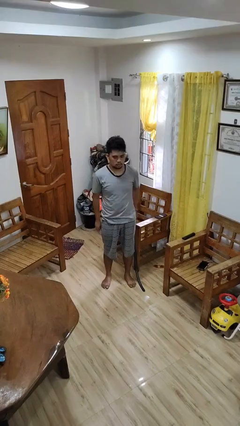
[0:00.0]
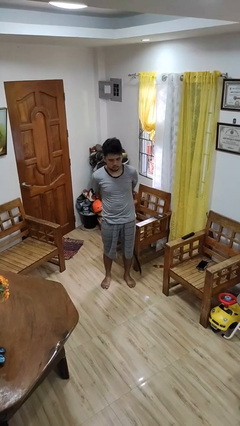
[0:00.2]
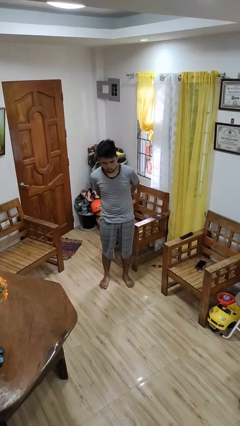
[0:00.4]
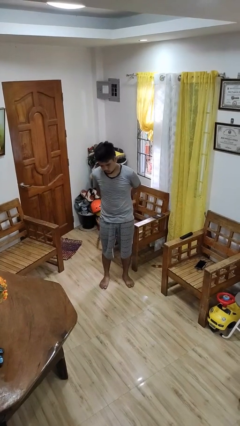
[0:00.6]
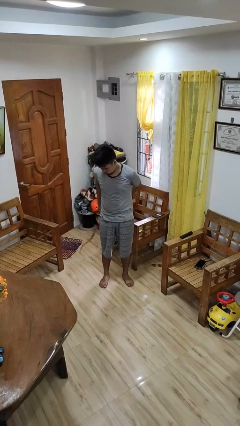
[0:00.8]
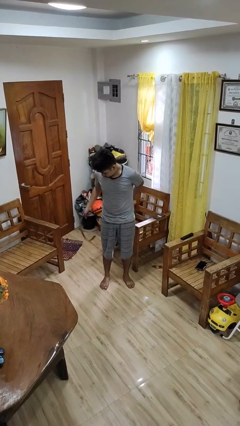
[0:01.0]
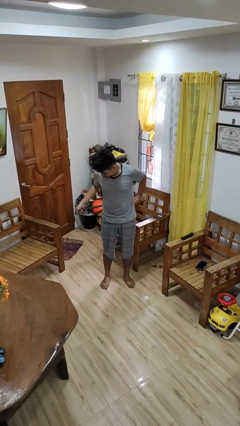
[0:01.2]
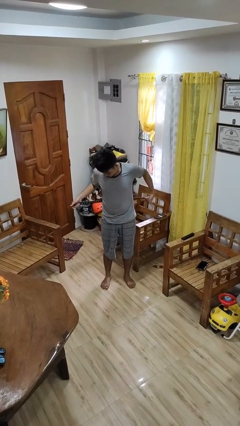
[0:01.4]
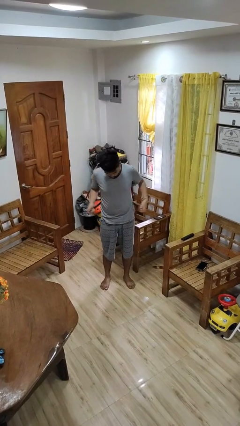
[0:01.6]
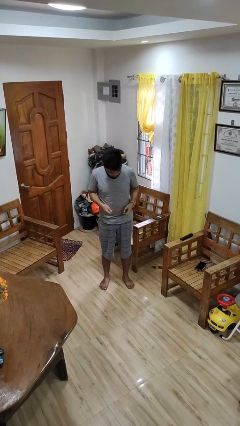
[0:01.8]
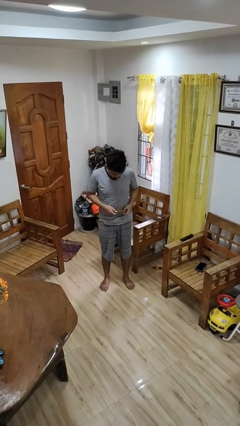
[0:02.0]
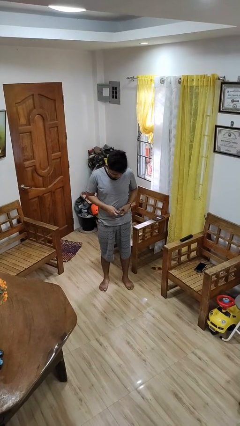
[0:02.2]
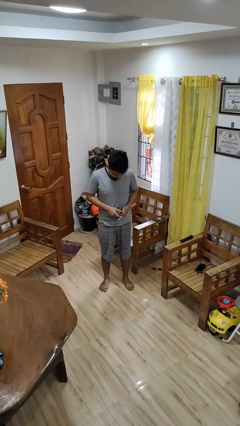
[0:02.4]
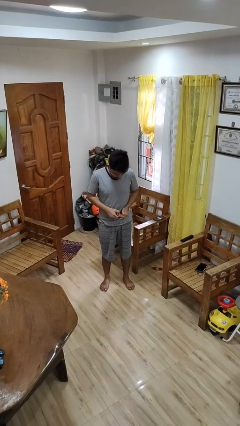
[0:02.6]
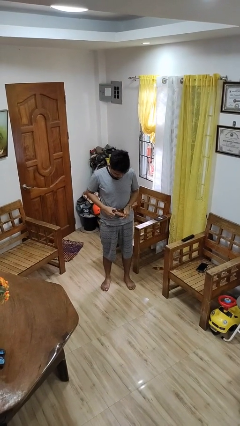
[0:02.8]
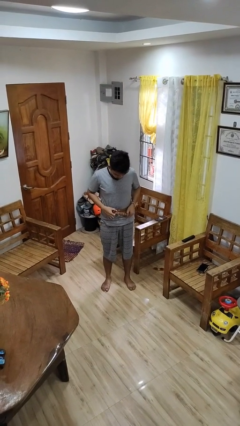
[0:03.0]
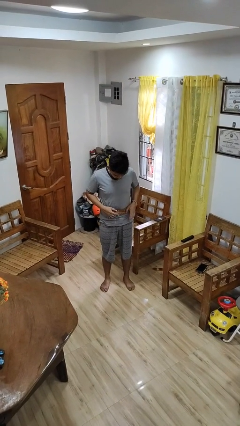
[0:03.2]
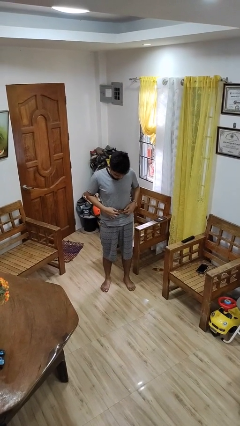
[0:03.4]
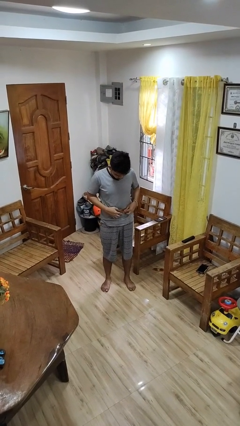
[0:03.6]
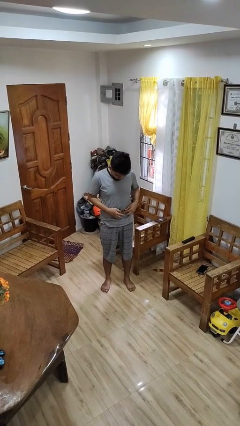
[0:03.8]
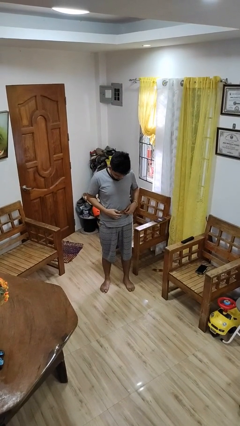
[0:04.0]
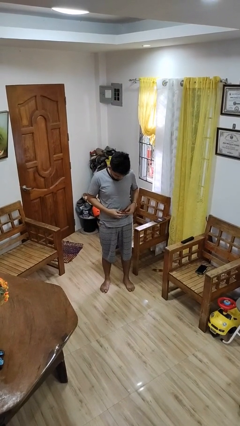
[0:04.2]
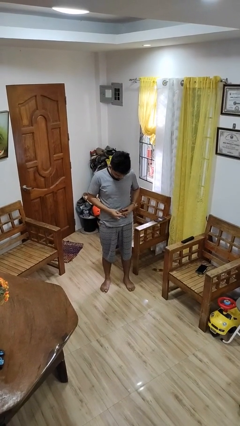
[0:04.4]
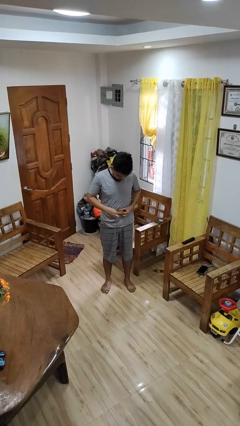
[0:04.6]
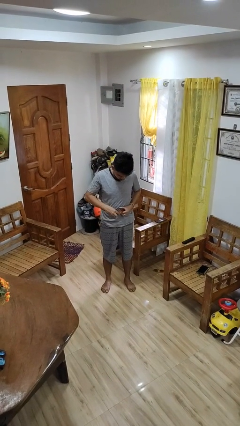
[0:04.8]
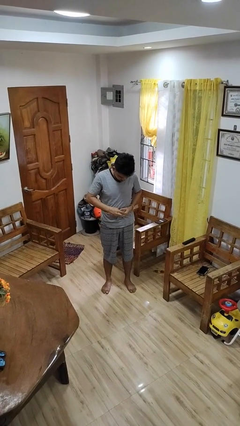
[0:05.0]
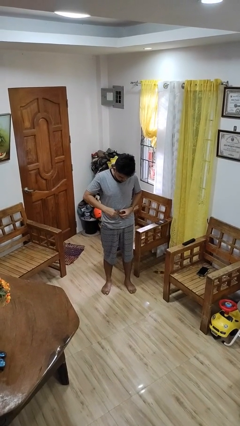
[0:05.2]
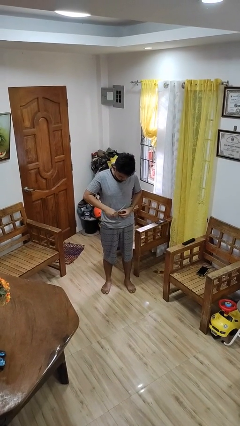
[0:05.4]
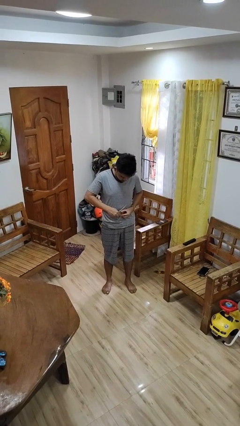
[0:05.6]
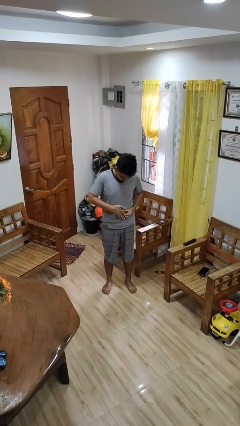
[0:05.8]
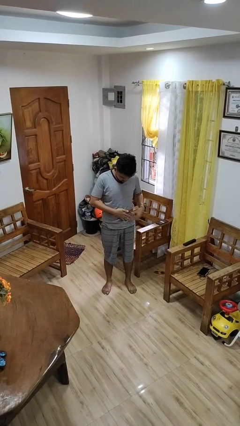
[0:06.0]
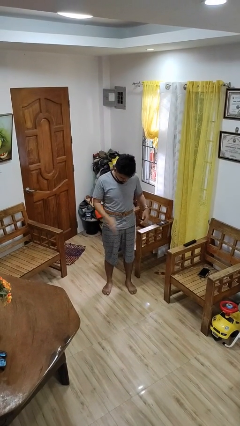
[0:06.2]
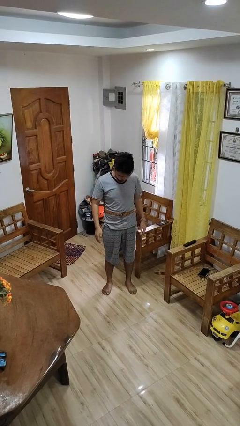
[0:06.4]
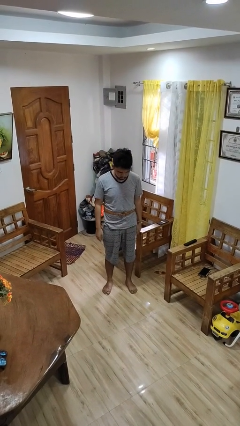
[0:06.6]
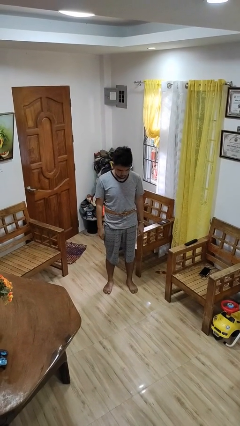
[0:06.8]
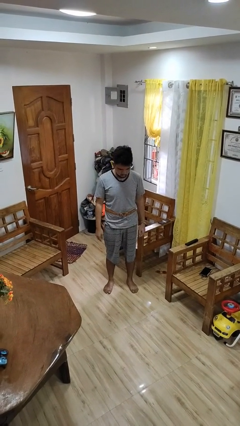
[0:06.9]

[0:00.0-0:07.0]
person puts on belt

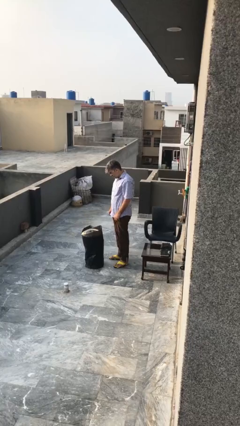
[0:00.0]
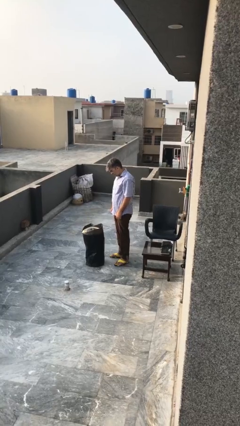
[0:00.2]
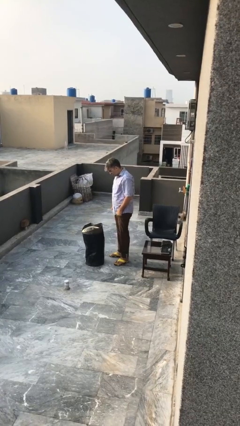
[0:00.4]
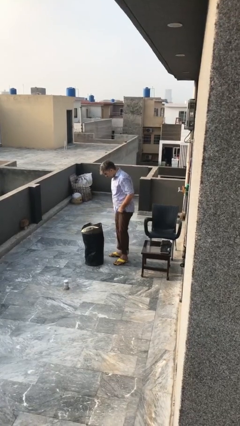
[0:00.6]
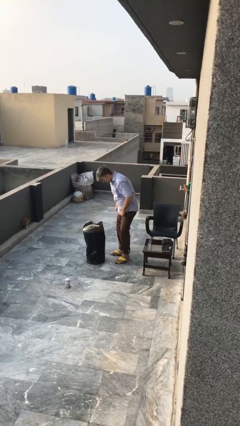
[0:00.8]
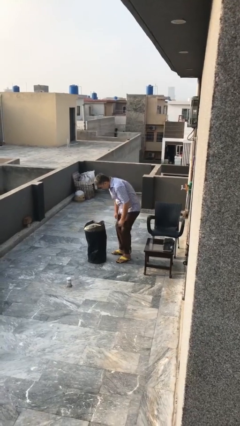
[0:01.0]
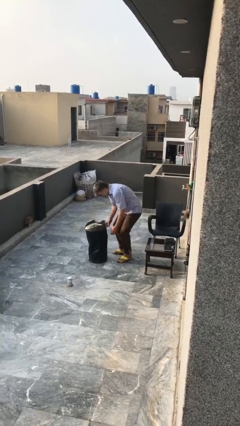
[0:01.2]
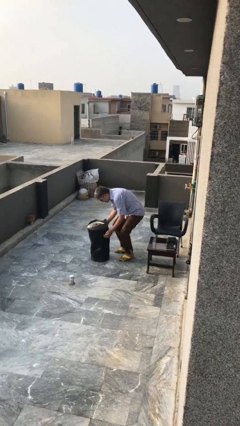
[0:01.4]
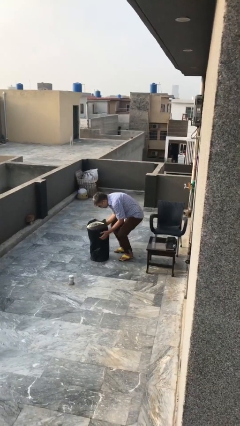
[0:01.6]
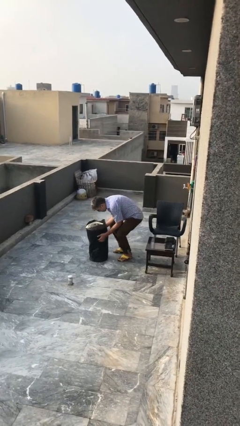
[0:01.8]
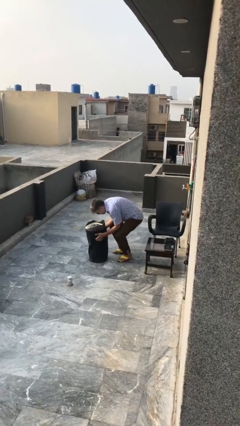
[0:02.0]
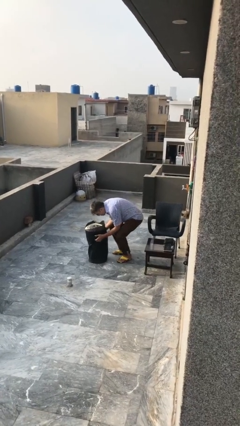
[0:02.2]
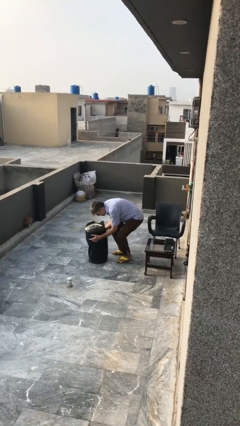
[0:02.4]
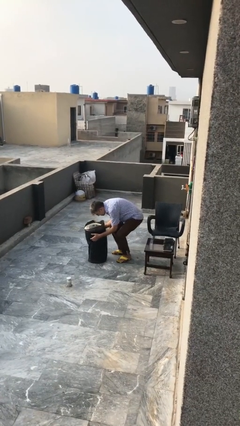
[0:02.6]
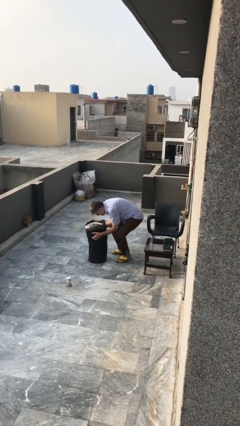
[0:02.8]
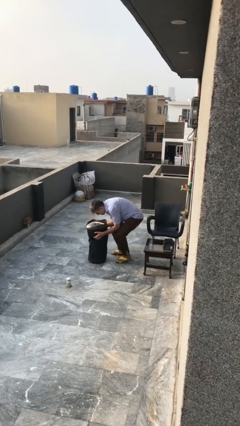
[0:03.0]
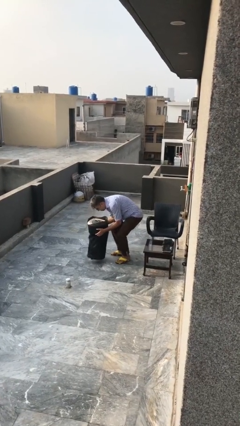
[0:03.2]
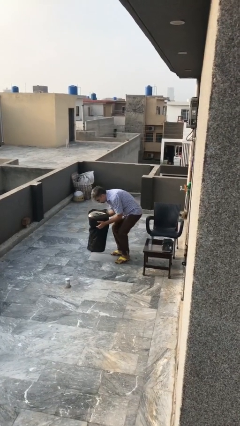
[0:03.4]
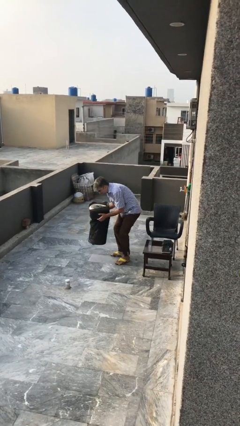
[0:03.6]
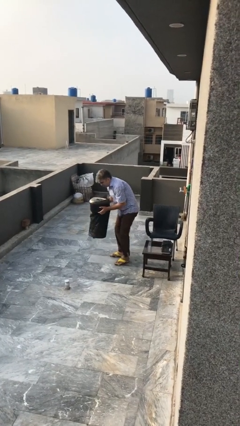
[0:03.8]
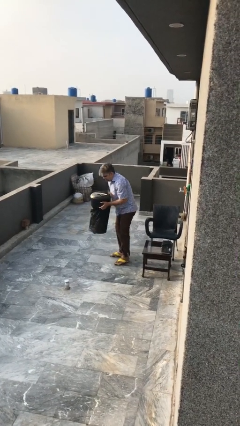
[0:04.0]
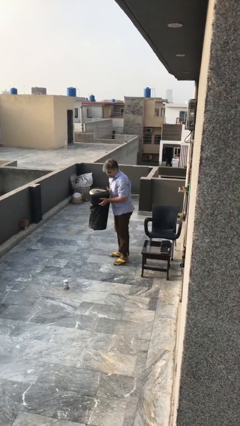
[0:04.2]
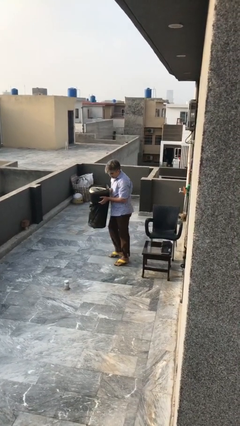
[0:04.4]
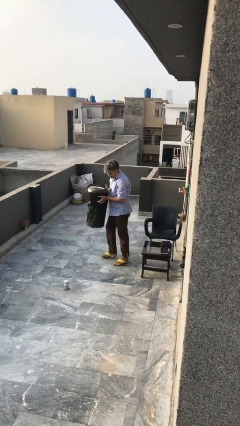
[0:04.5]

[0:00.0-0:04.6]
person picks up object from floor

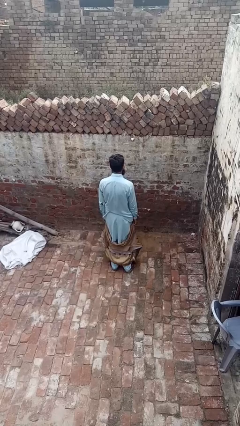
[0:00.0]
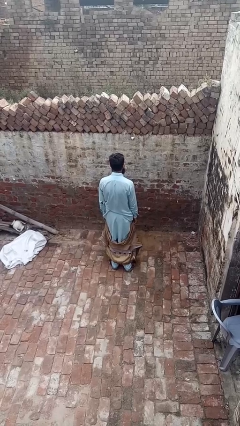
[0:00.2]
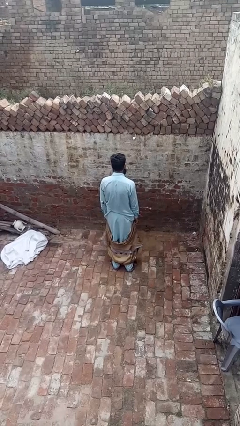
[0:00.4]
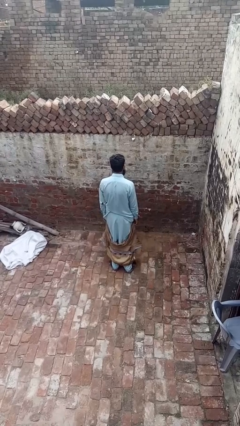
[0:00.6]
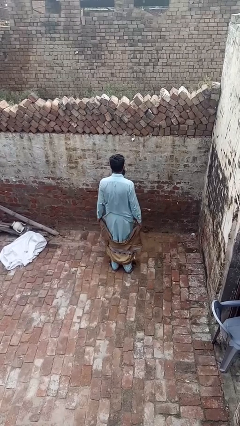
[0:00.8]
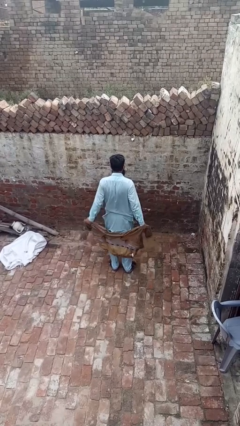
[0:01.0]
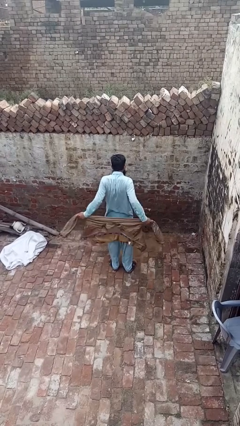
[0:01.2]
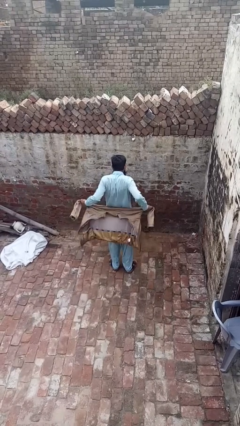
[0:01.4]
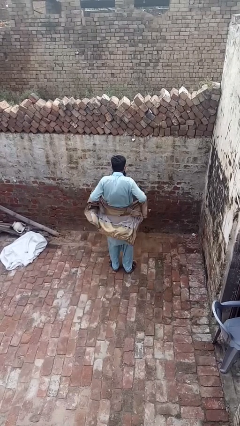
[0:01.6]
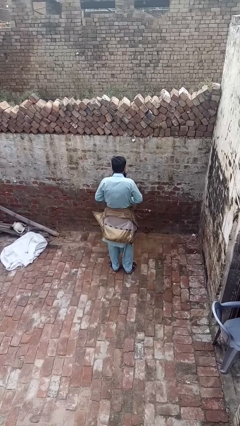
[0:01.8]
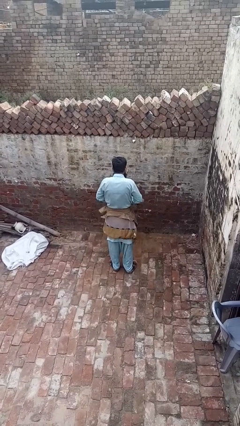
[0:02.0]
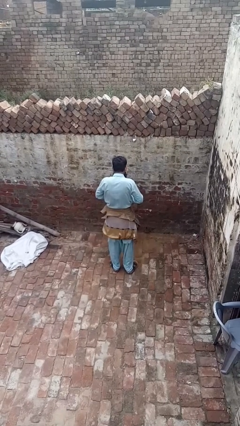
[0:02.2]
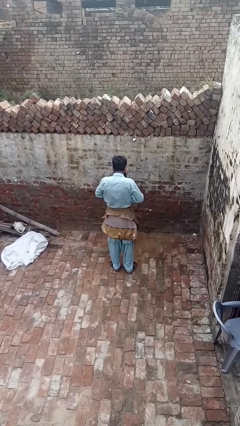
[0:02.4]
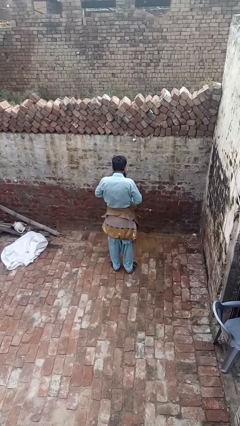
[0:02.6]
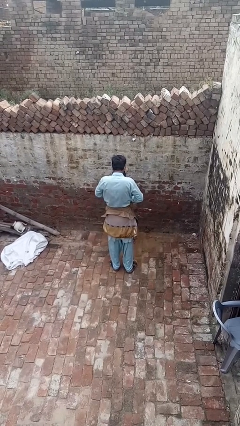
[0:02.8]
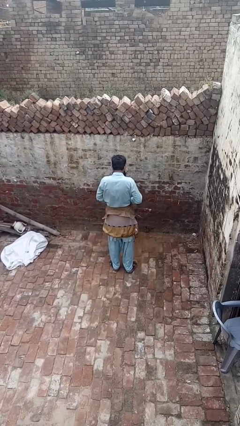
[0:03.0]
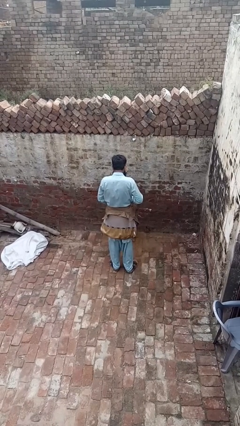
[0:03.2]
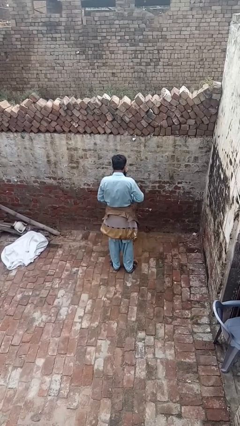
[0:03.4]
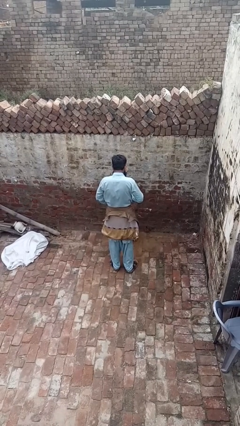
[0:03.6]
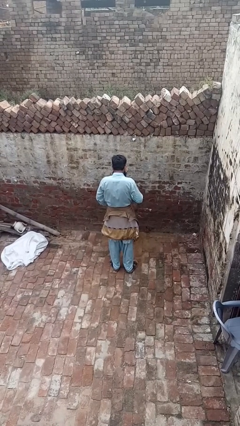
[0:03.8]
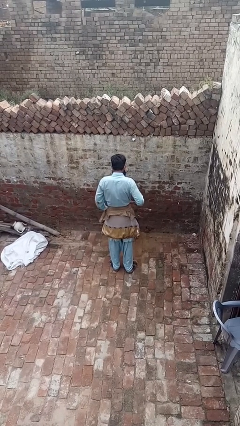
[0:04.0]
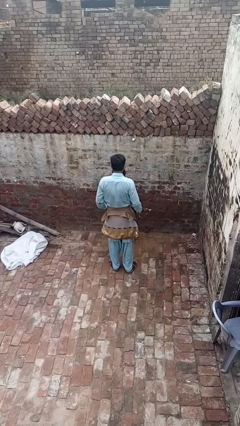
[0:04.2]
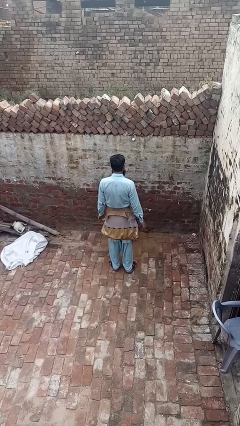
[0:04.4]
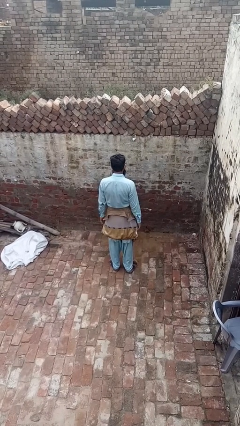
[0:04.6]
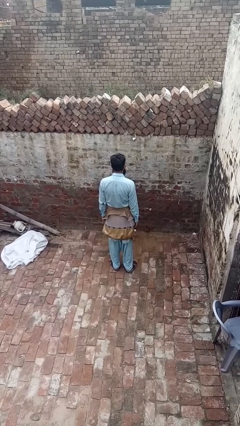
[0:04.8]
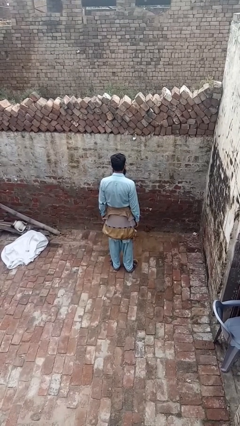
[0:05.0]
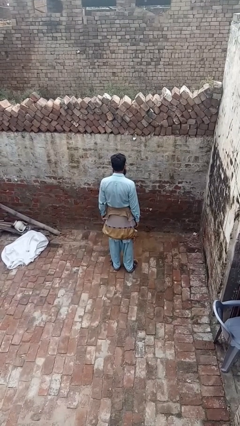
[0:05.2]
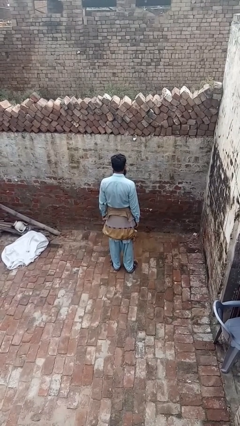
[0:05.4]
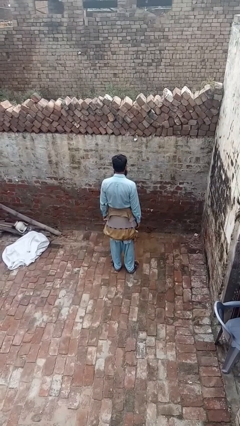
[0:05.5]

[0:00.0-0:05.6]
person ties jacket around waist

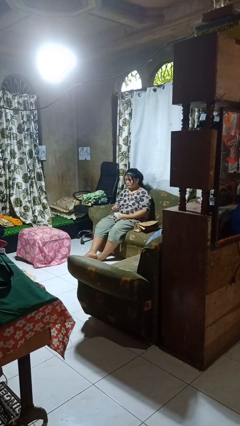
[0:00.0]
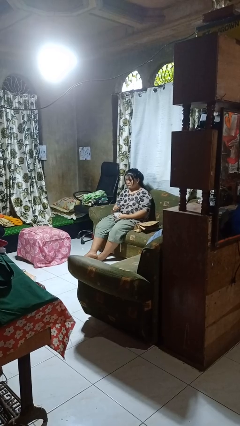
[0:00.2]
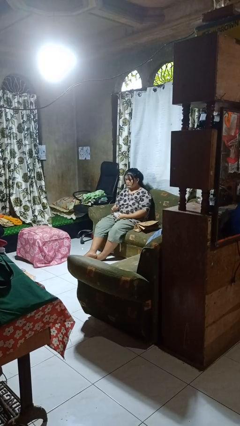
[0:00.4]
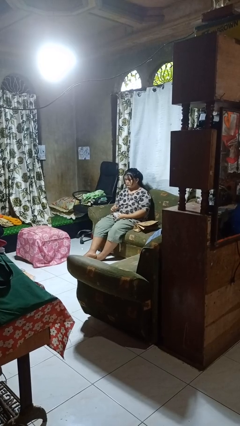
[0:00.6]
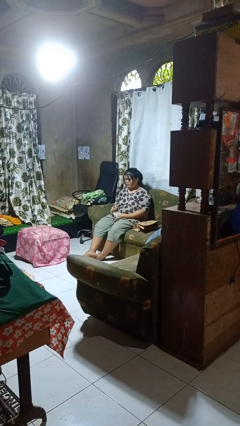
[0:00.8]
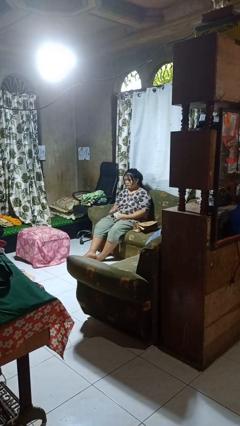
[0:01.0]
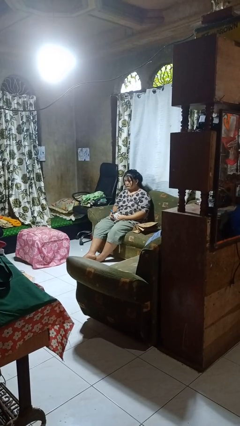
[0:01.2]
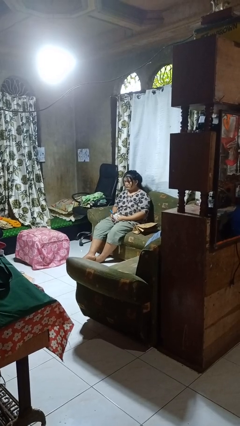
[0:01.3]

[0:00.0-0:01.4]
person stirs mug
